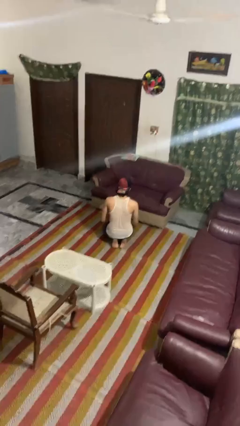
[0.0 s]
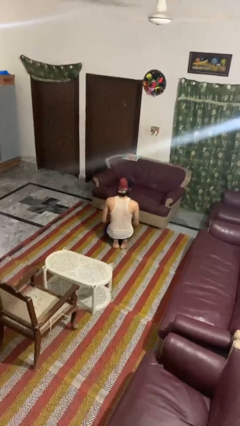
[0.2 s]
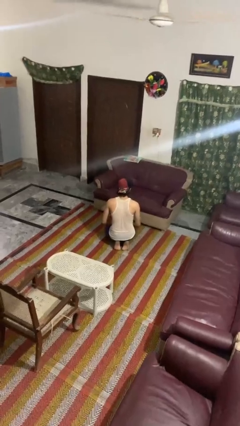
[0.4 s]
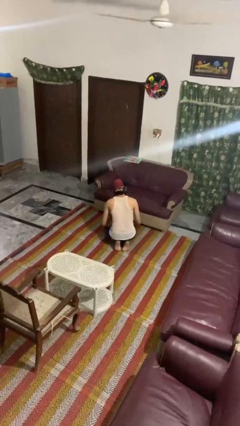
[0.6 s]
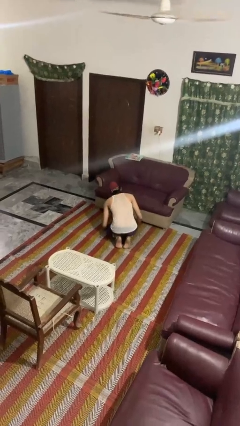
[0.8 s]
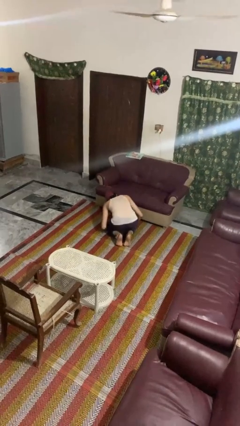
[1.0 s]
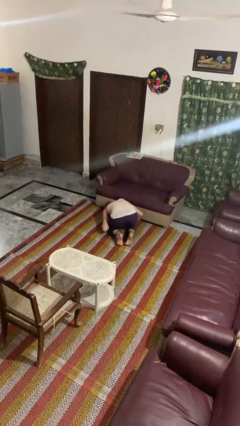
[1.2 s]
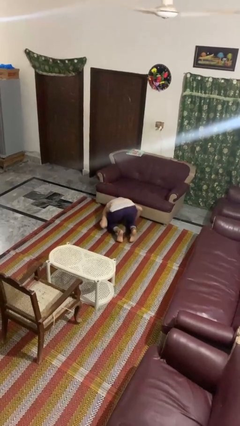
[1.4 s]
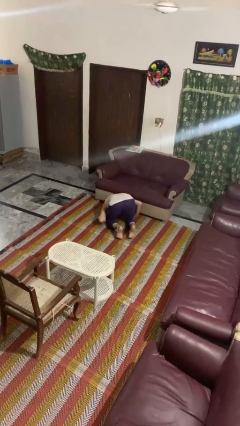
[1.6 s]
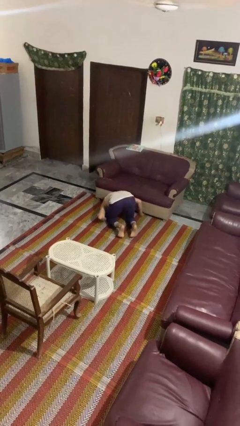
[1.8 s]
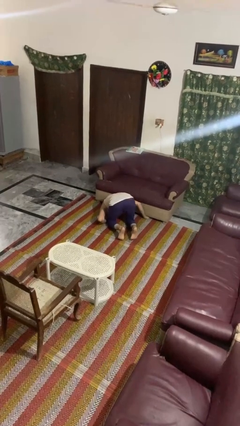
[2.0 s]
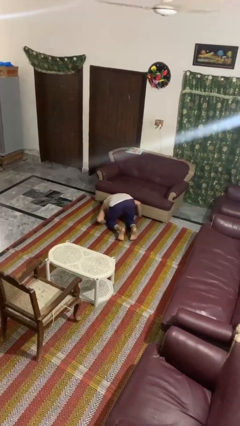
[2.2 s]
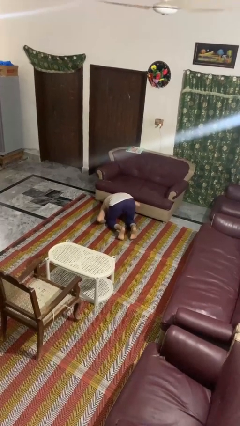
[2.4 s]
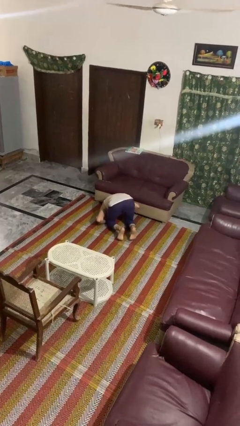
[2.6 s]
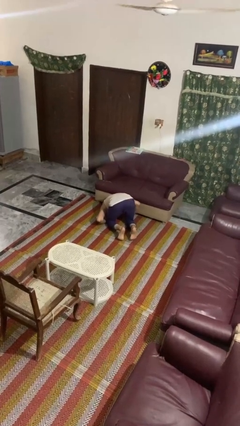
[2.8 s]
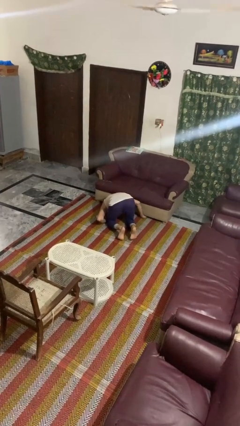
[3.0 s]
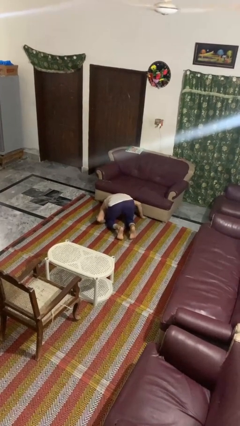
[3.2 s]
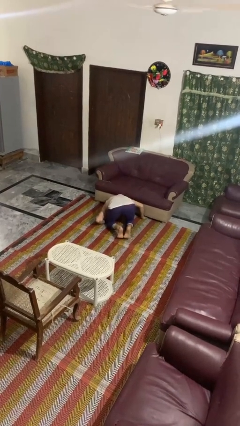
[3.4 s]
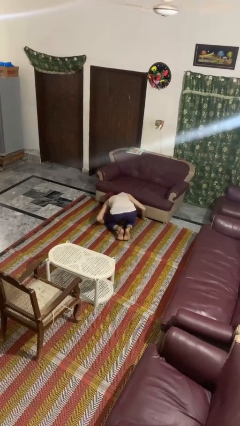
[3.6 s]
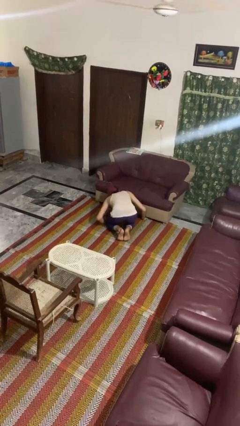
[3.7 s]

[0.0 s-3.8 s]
person searches under couch

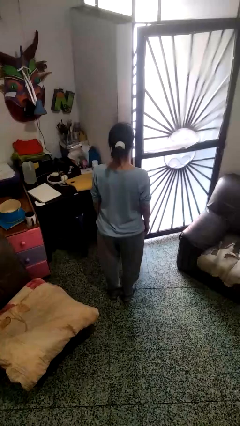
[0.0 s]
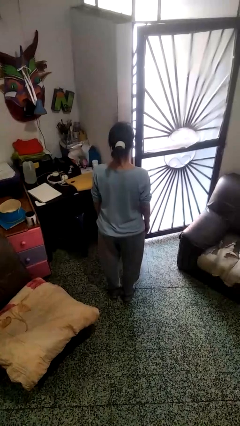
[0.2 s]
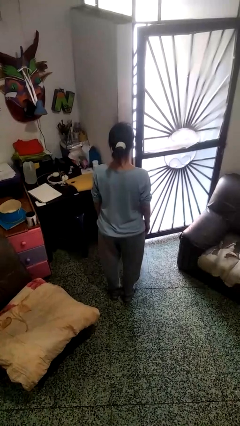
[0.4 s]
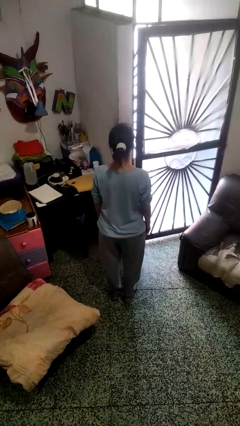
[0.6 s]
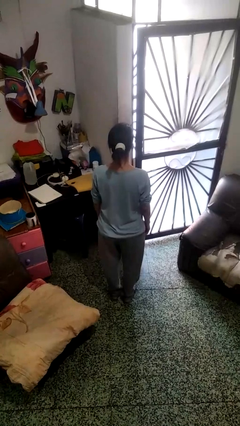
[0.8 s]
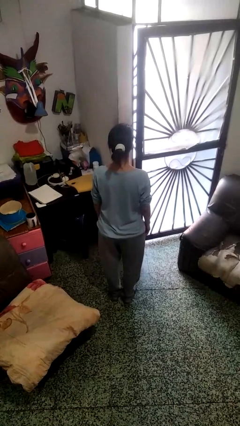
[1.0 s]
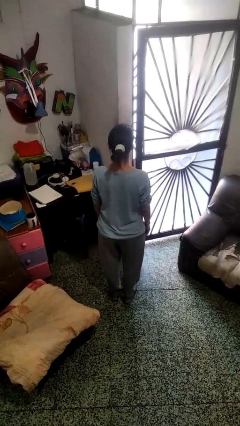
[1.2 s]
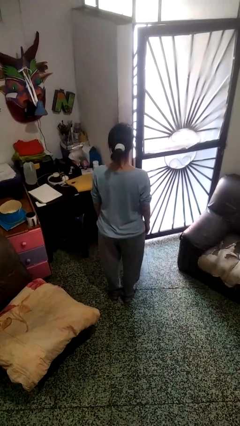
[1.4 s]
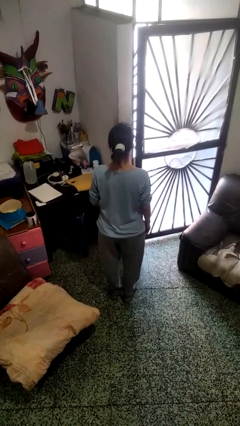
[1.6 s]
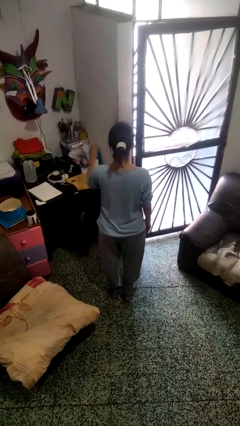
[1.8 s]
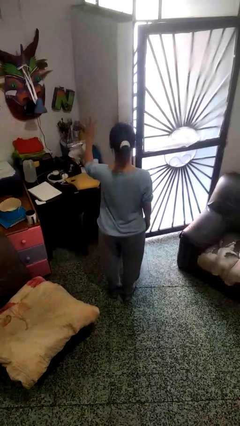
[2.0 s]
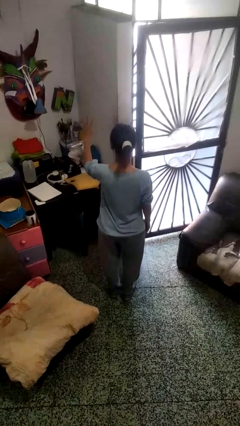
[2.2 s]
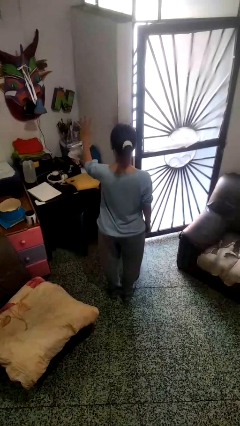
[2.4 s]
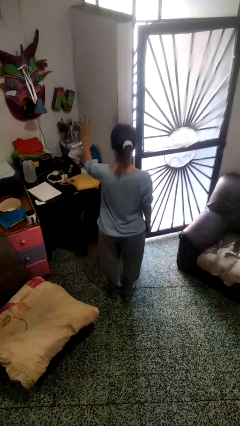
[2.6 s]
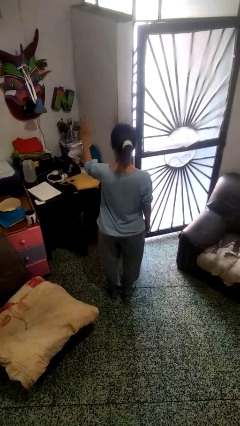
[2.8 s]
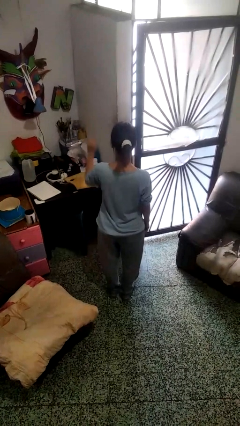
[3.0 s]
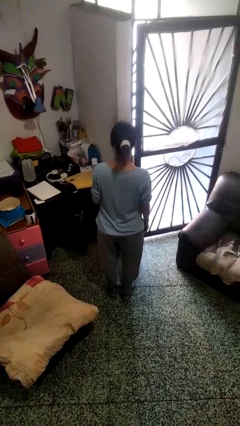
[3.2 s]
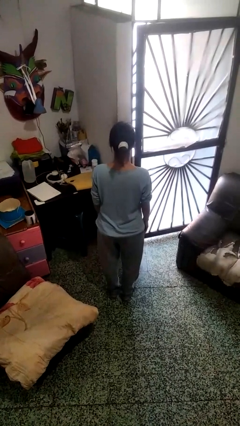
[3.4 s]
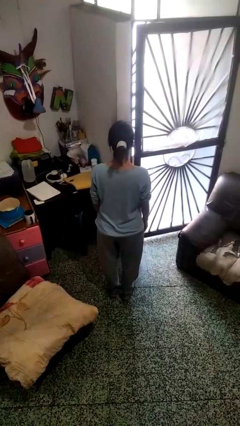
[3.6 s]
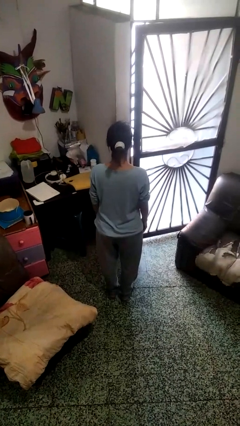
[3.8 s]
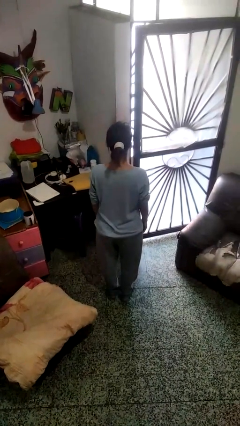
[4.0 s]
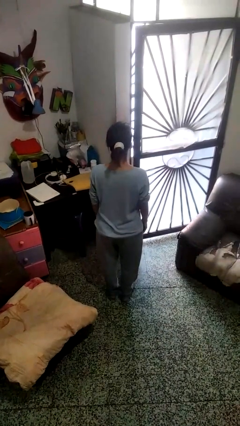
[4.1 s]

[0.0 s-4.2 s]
person gestures number four

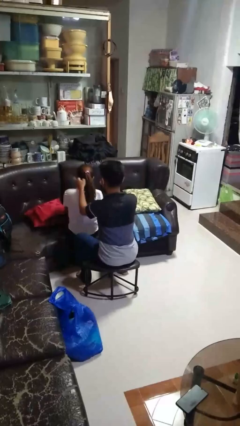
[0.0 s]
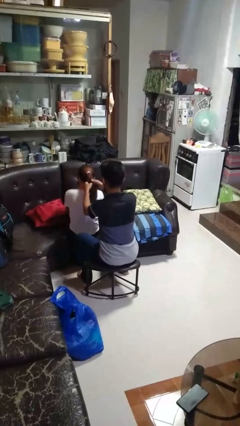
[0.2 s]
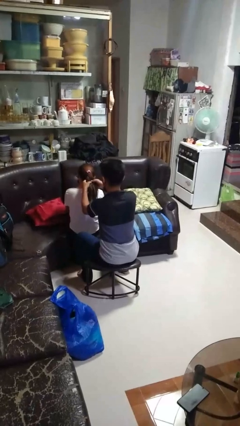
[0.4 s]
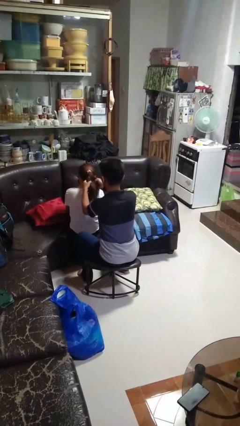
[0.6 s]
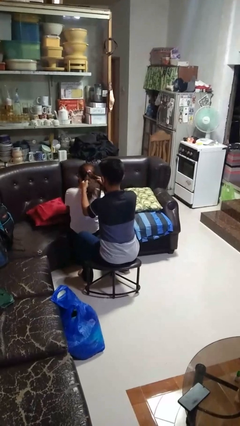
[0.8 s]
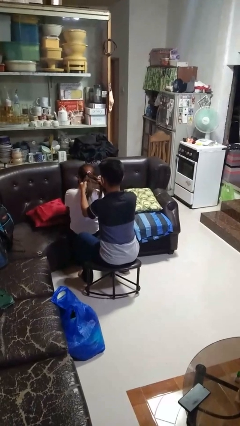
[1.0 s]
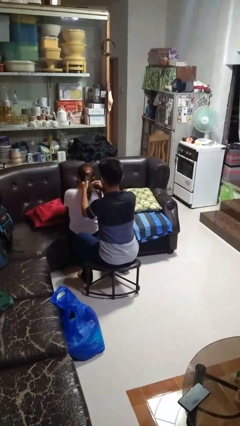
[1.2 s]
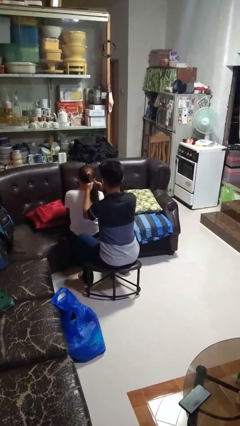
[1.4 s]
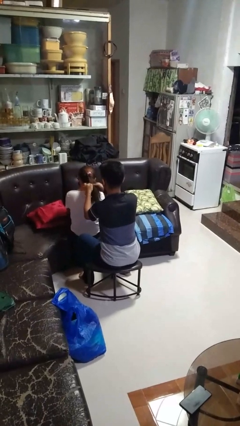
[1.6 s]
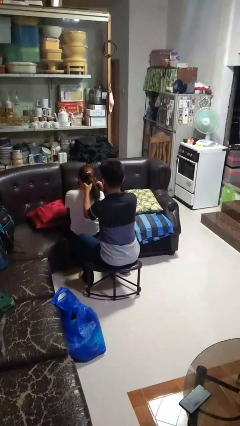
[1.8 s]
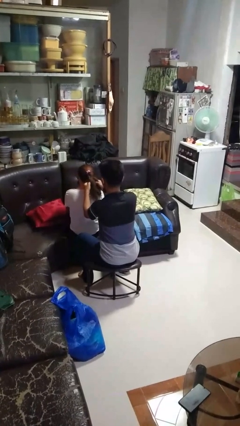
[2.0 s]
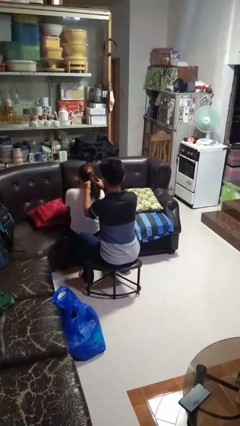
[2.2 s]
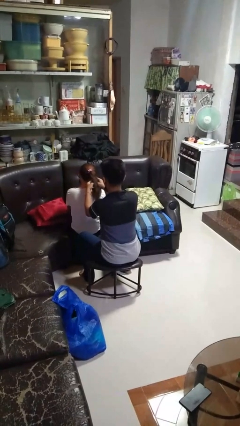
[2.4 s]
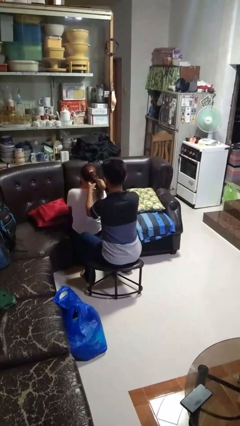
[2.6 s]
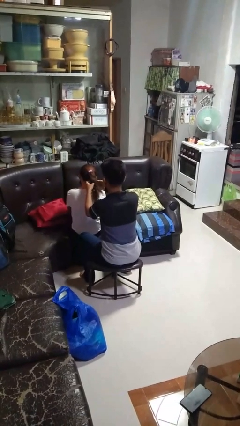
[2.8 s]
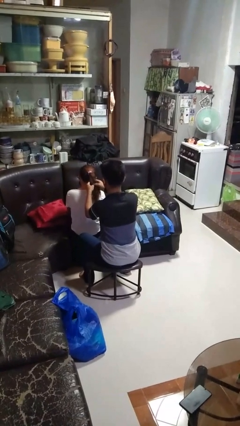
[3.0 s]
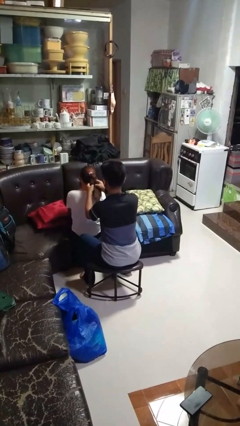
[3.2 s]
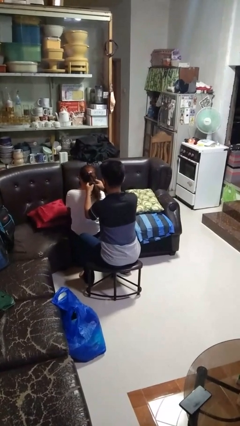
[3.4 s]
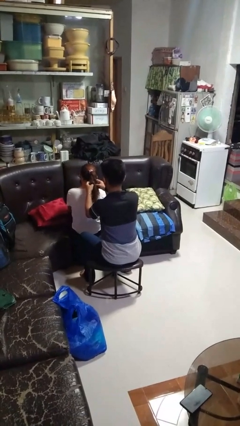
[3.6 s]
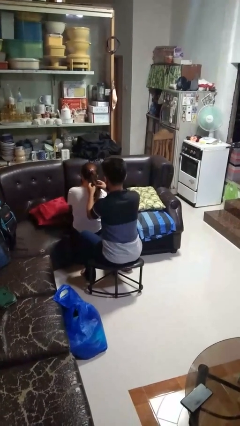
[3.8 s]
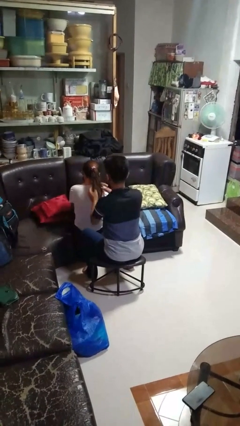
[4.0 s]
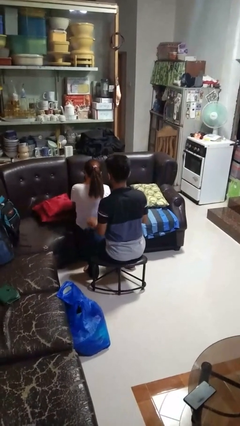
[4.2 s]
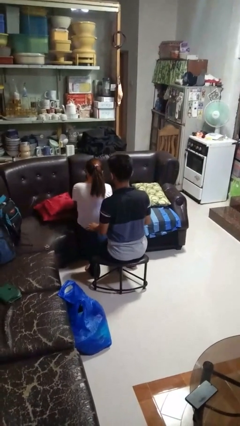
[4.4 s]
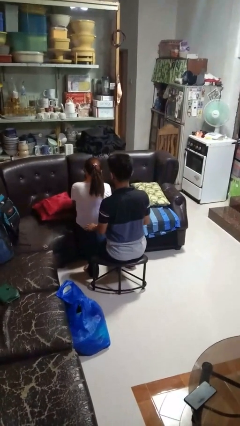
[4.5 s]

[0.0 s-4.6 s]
person braids hair of person

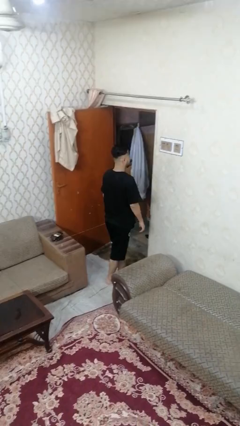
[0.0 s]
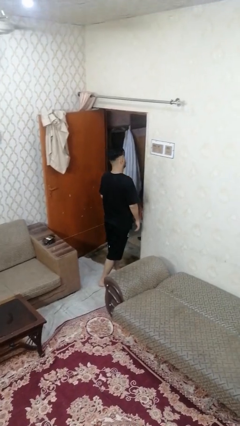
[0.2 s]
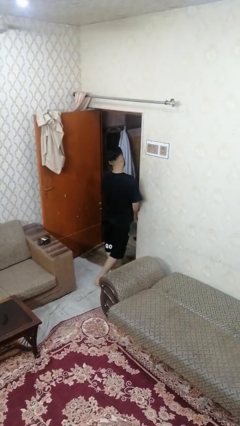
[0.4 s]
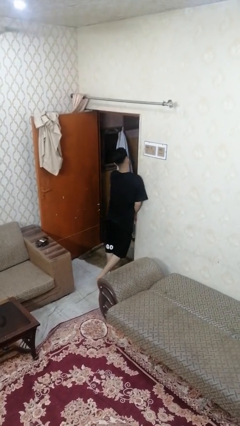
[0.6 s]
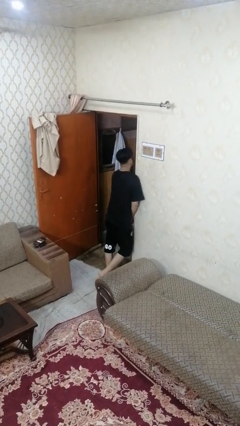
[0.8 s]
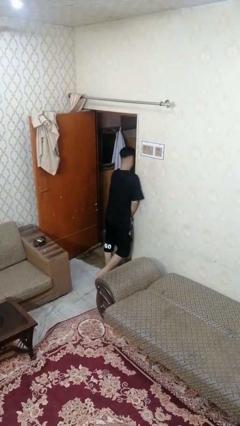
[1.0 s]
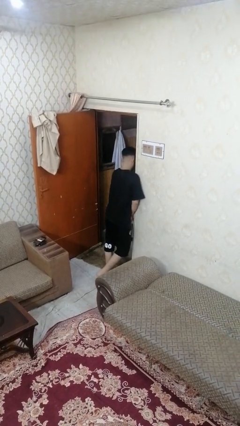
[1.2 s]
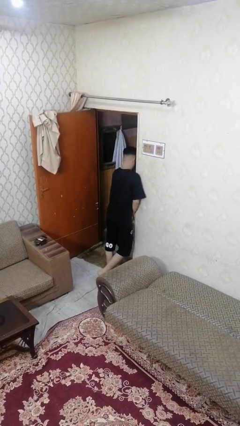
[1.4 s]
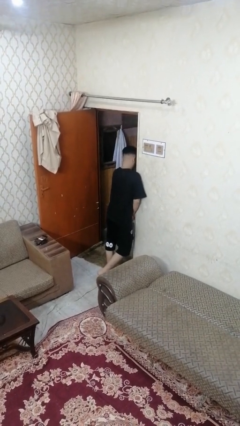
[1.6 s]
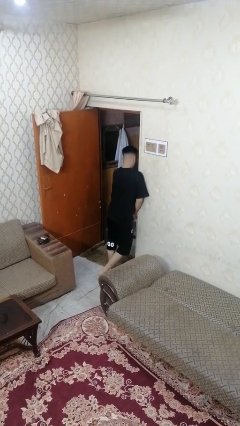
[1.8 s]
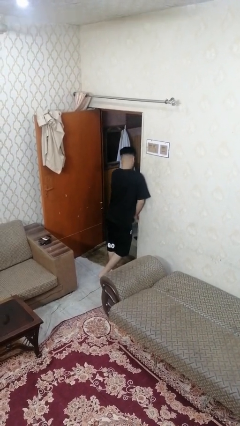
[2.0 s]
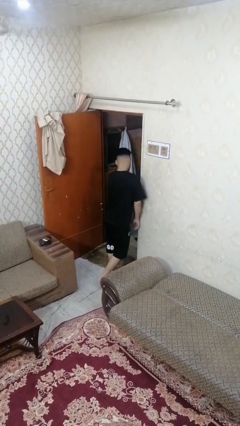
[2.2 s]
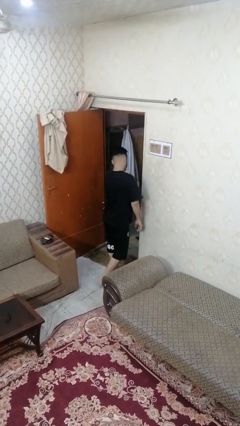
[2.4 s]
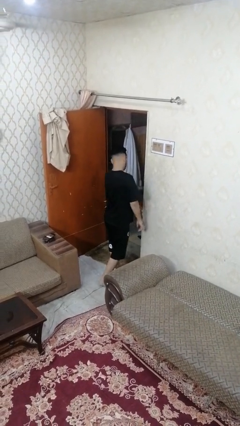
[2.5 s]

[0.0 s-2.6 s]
person bumps into wall

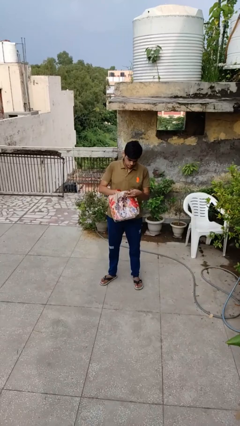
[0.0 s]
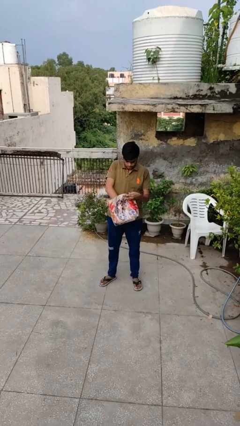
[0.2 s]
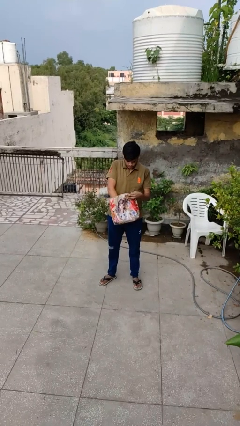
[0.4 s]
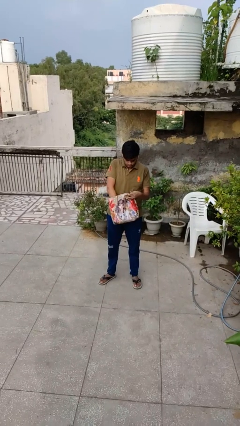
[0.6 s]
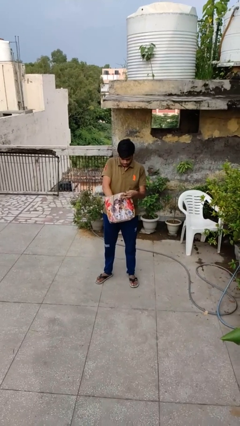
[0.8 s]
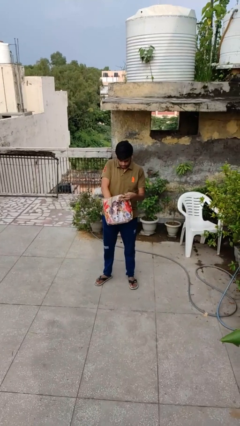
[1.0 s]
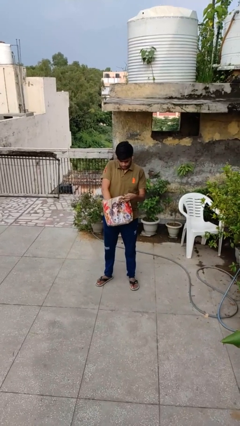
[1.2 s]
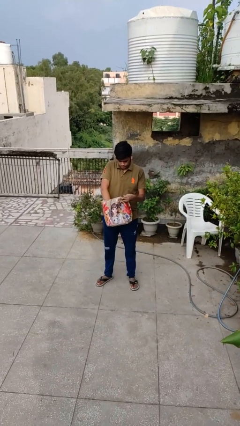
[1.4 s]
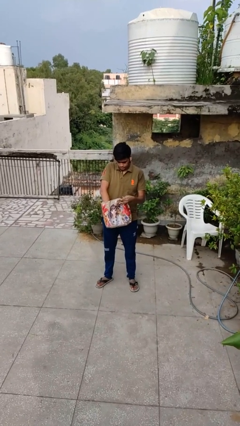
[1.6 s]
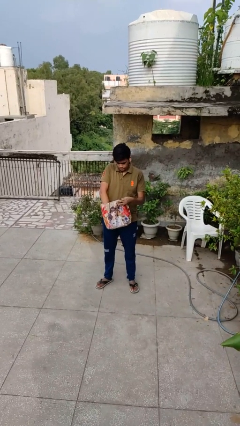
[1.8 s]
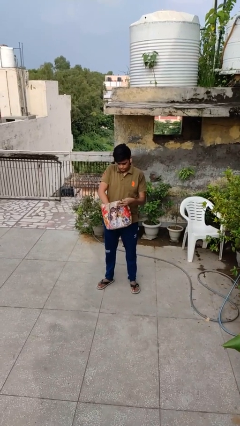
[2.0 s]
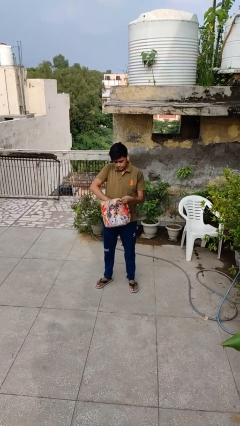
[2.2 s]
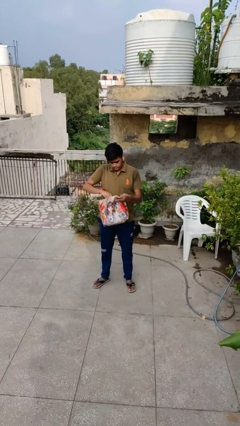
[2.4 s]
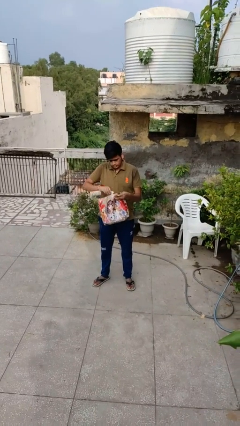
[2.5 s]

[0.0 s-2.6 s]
person searches in purse
